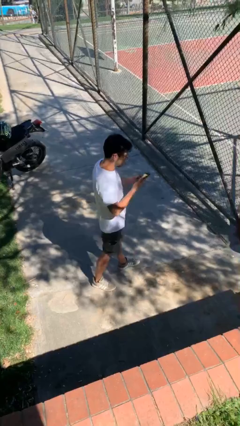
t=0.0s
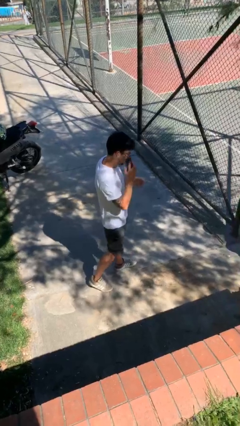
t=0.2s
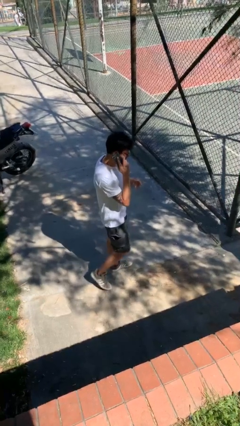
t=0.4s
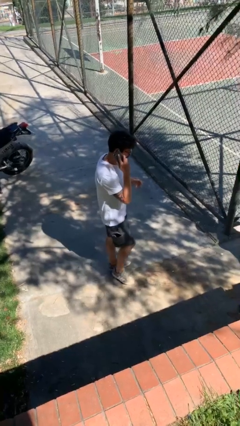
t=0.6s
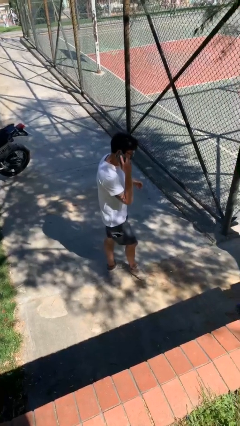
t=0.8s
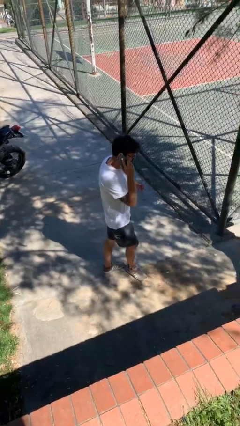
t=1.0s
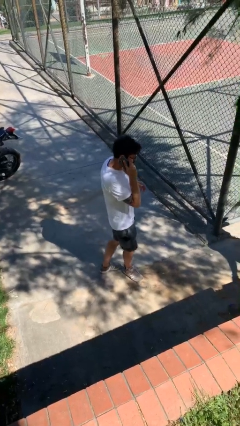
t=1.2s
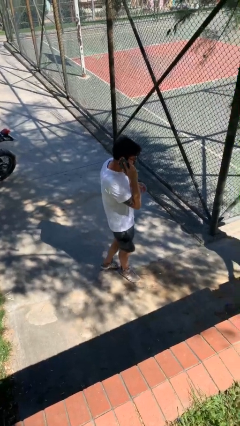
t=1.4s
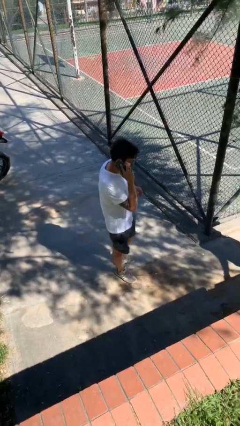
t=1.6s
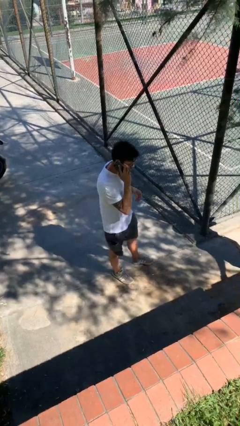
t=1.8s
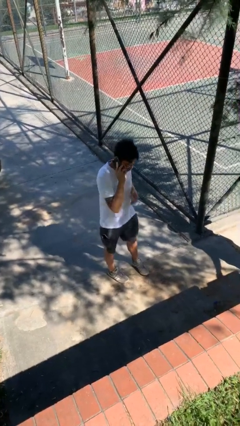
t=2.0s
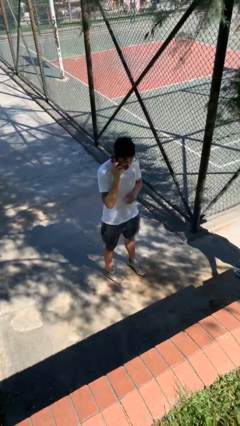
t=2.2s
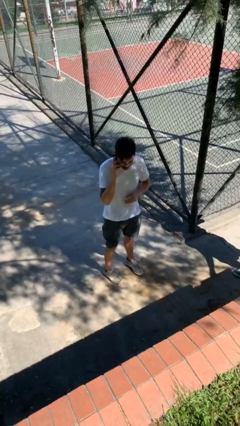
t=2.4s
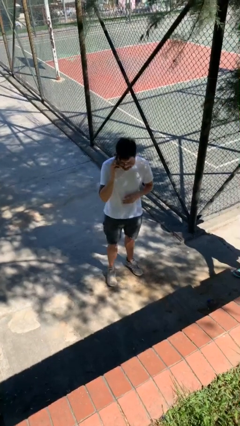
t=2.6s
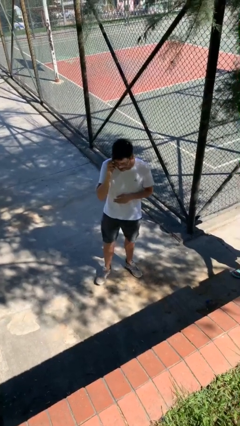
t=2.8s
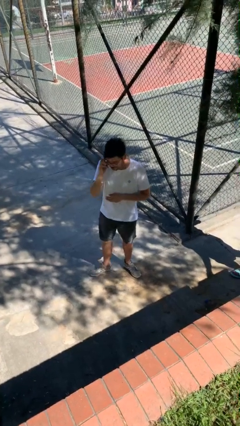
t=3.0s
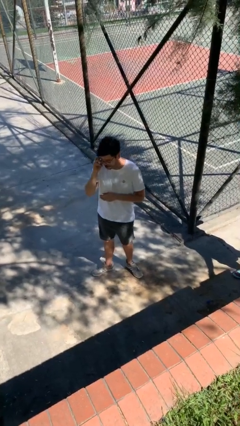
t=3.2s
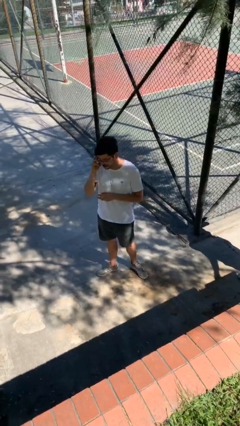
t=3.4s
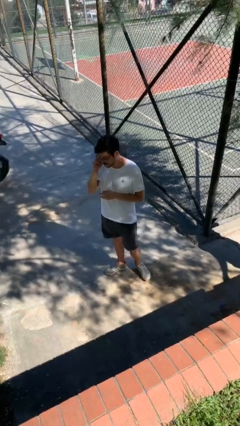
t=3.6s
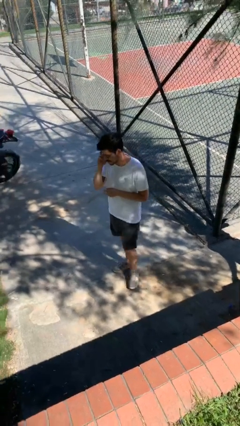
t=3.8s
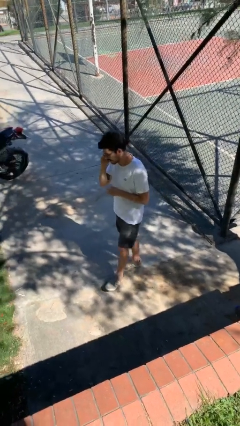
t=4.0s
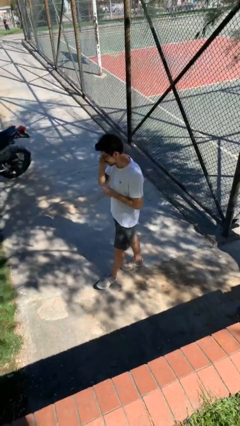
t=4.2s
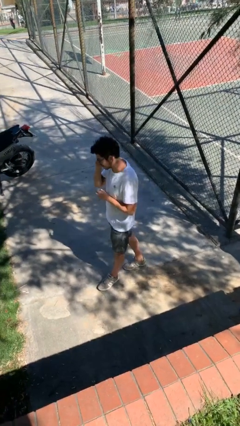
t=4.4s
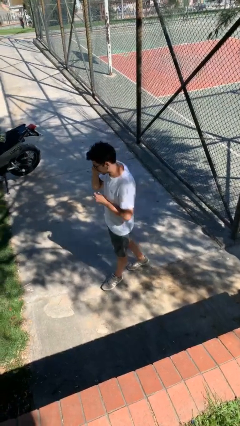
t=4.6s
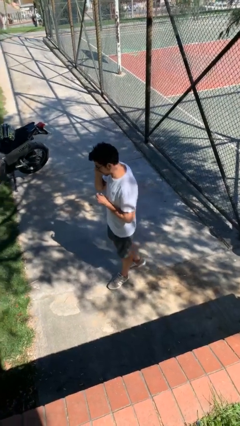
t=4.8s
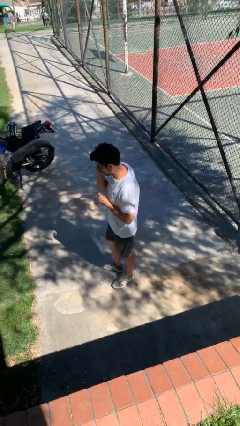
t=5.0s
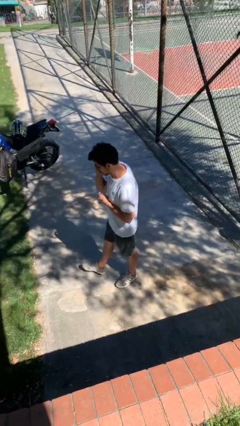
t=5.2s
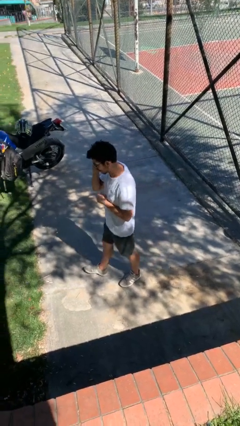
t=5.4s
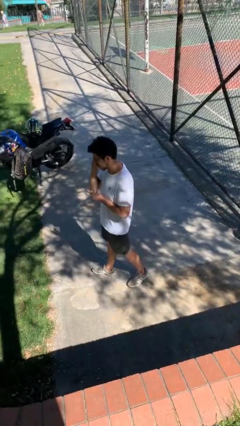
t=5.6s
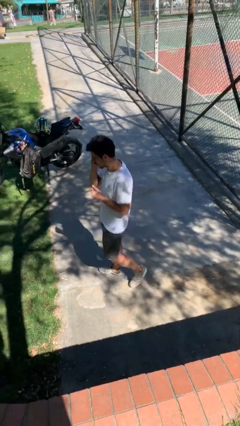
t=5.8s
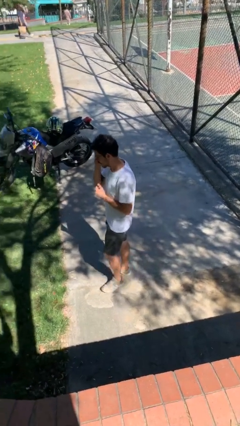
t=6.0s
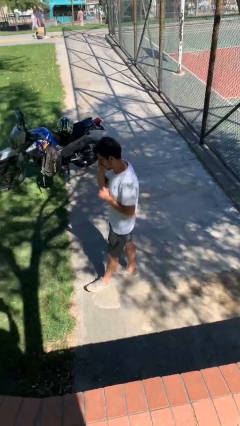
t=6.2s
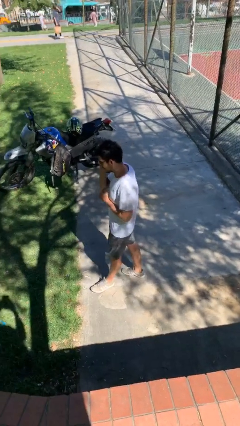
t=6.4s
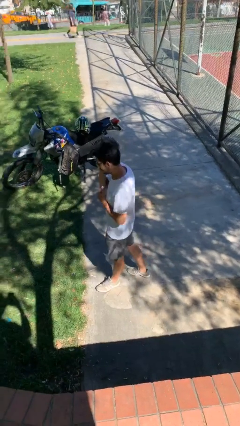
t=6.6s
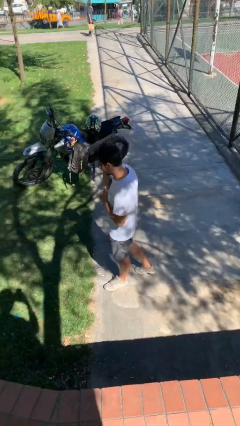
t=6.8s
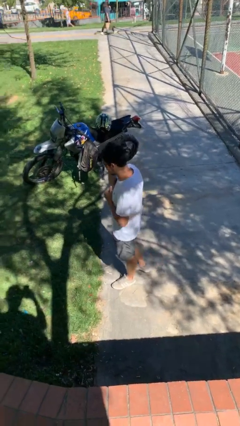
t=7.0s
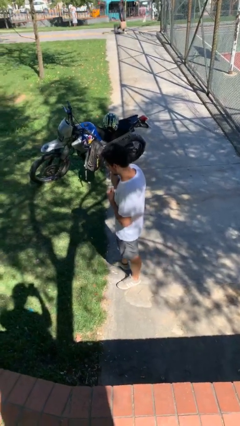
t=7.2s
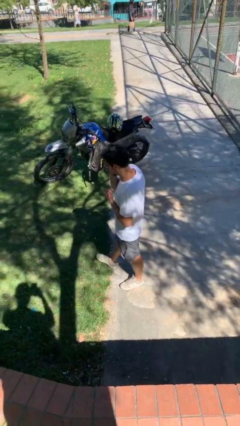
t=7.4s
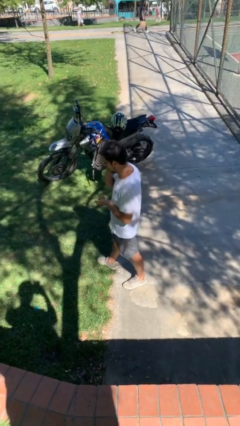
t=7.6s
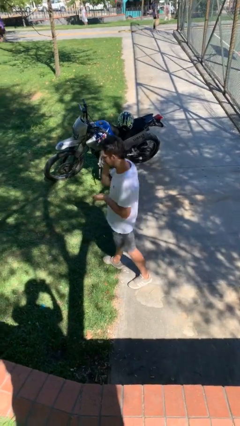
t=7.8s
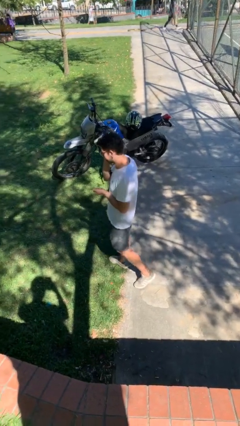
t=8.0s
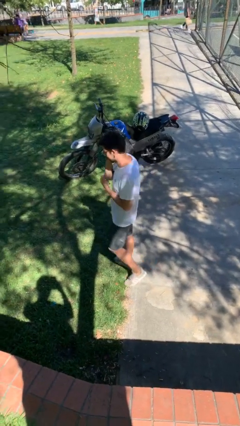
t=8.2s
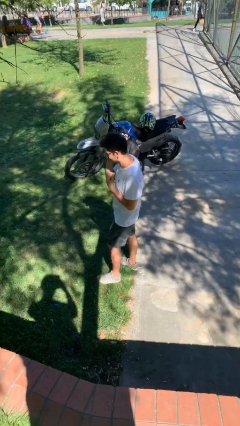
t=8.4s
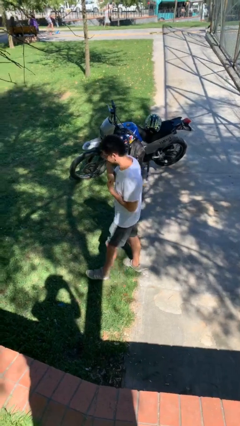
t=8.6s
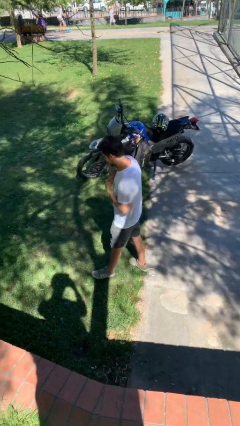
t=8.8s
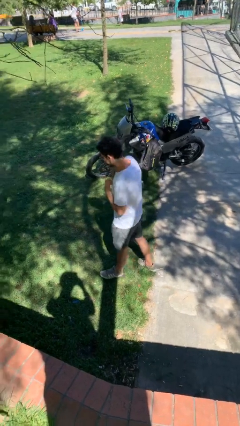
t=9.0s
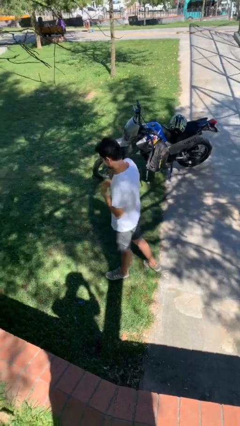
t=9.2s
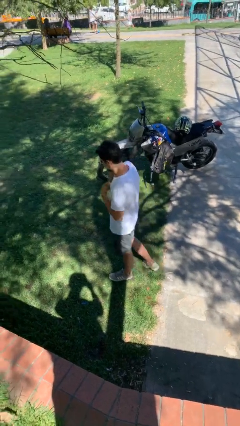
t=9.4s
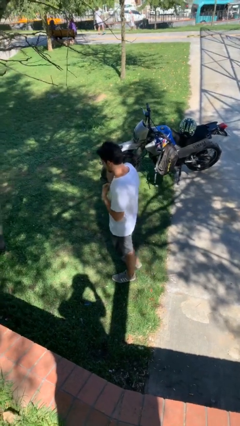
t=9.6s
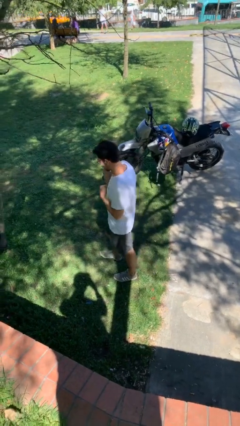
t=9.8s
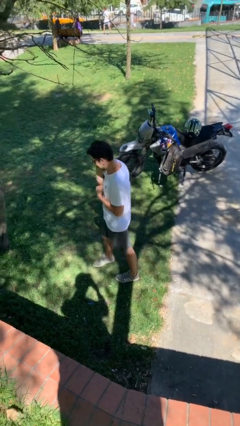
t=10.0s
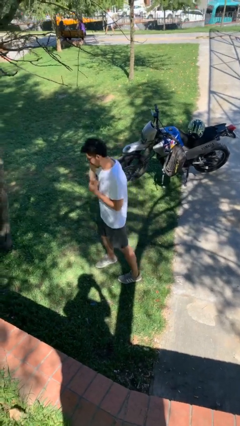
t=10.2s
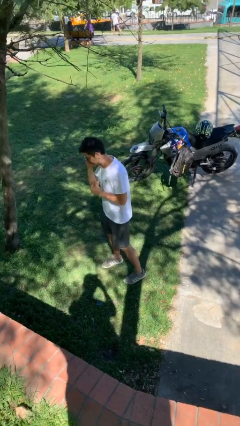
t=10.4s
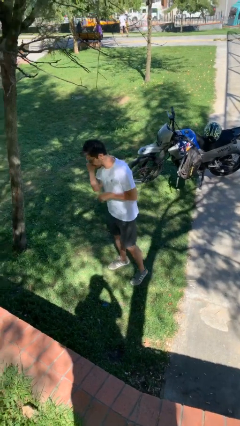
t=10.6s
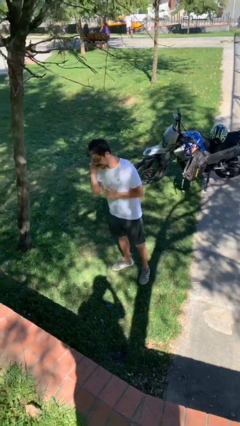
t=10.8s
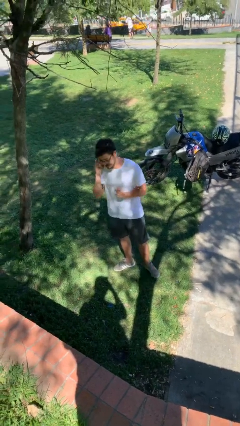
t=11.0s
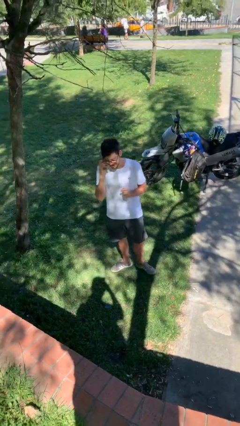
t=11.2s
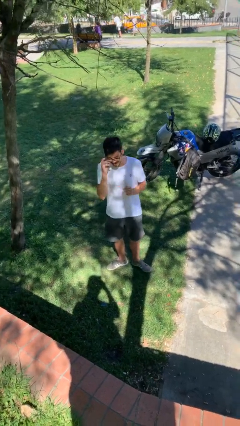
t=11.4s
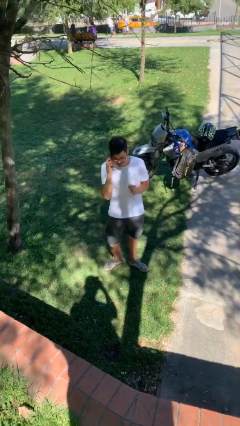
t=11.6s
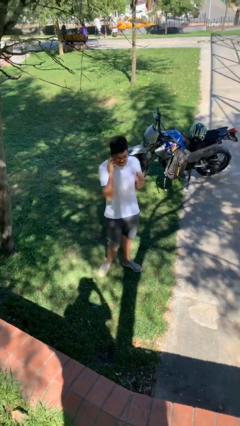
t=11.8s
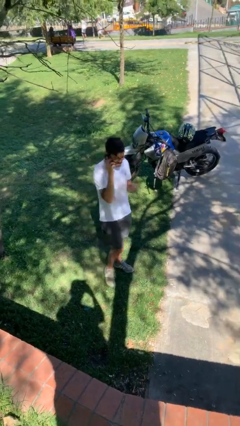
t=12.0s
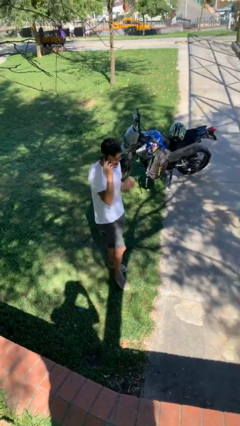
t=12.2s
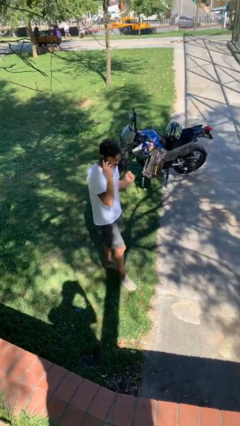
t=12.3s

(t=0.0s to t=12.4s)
person talks on phone

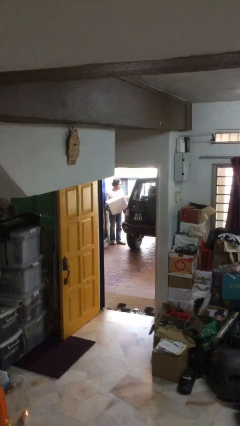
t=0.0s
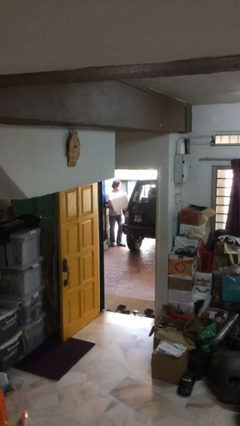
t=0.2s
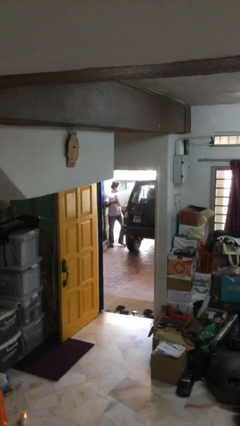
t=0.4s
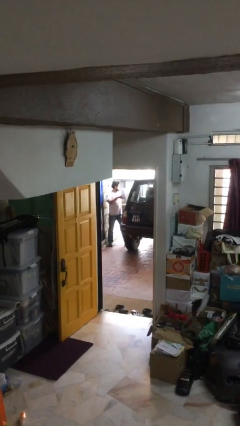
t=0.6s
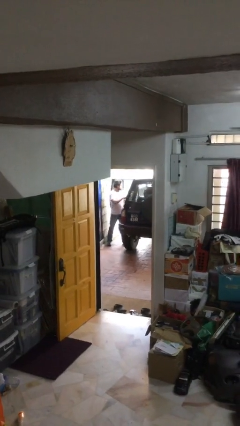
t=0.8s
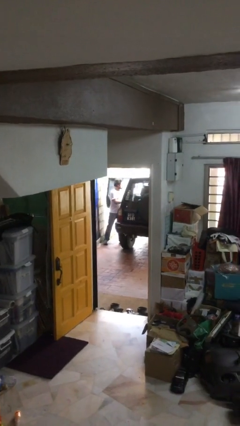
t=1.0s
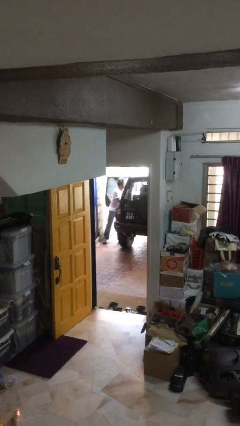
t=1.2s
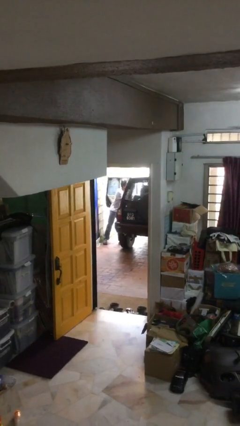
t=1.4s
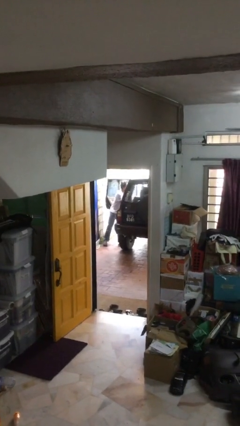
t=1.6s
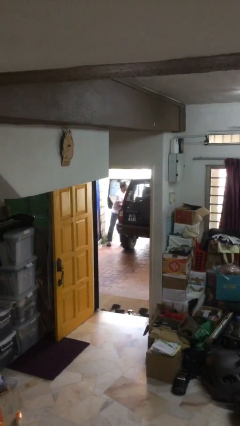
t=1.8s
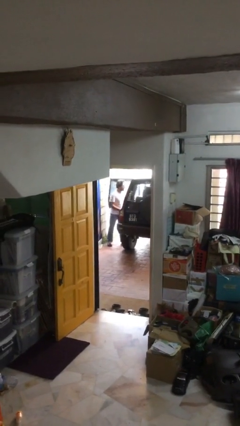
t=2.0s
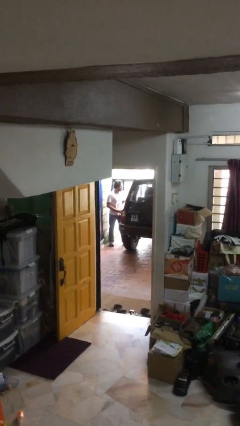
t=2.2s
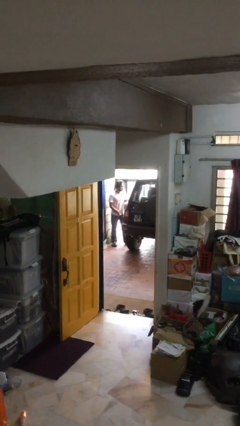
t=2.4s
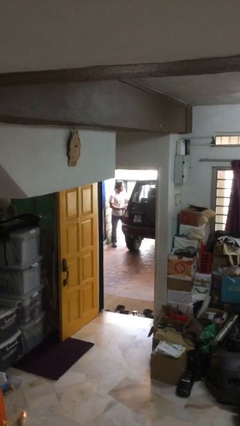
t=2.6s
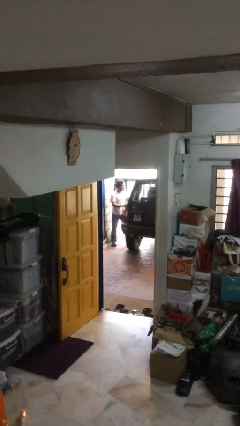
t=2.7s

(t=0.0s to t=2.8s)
person loads car

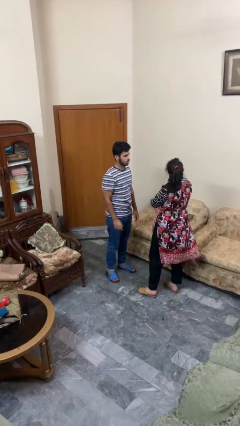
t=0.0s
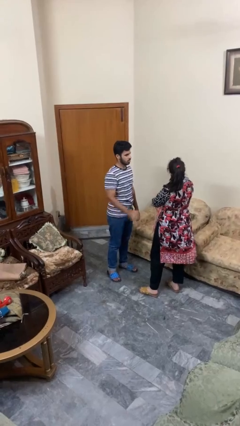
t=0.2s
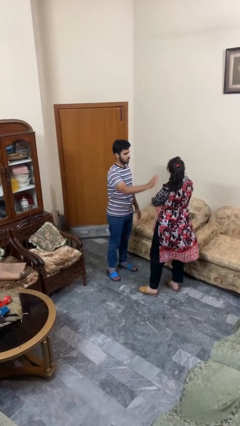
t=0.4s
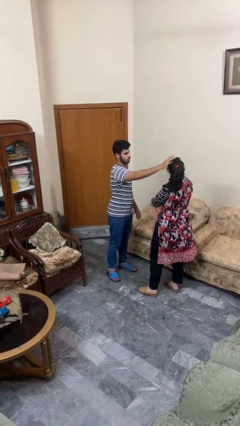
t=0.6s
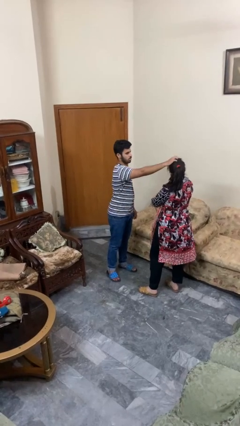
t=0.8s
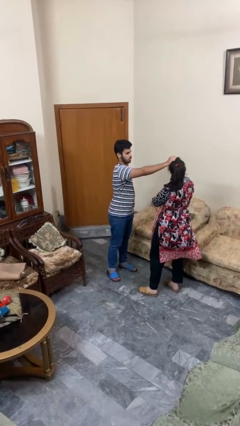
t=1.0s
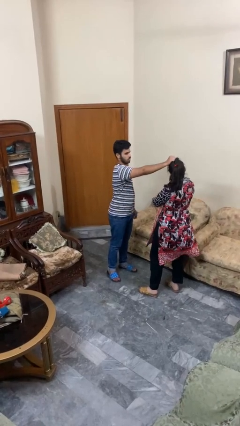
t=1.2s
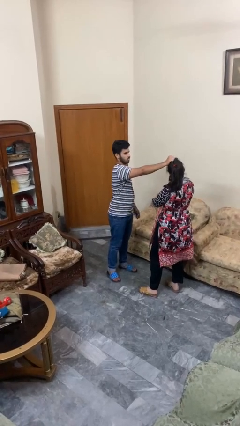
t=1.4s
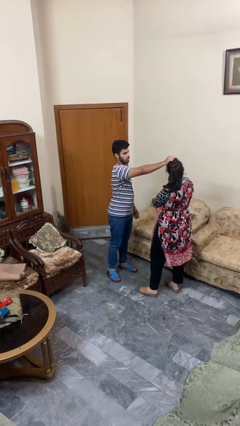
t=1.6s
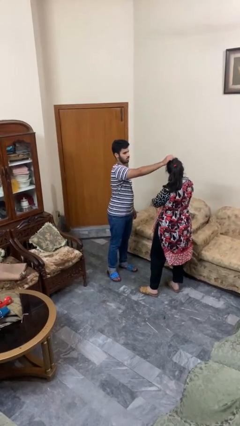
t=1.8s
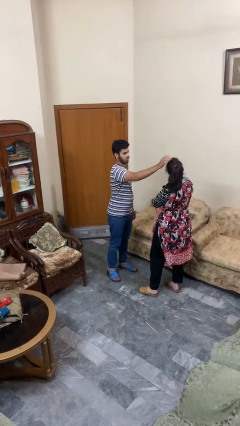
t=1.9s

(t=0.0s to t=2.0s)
person grabs person by hair

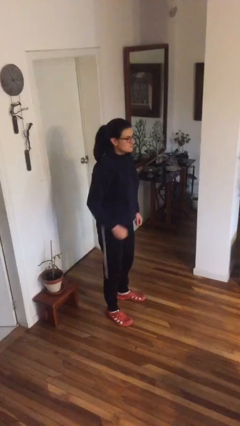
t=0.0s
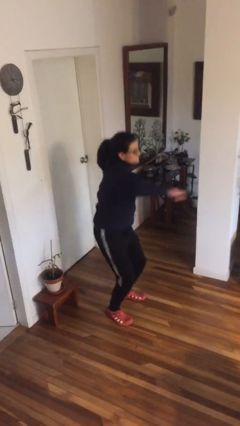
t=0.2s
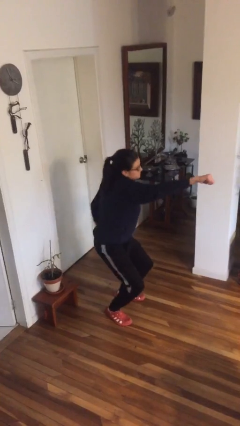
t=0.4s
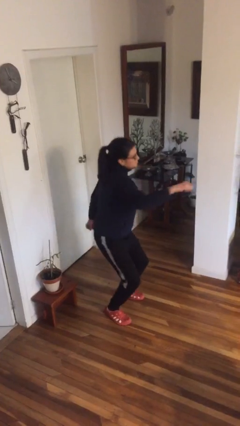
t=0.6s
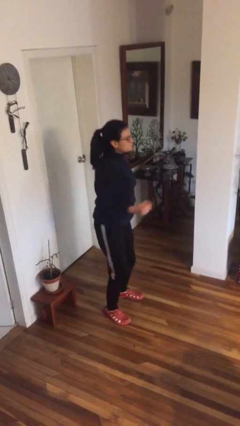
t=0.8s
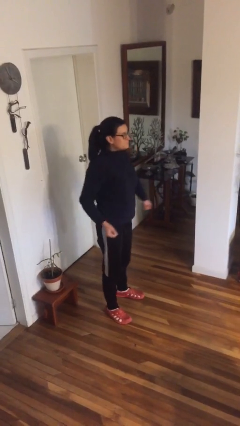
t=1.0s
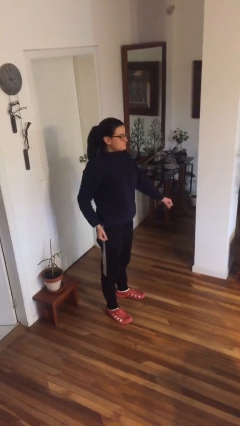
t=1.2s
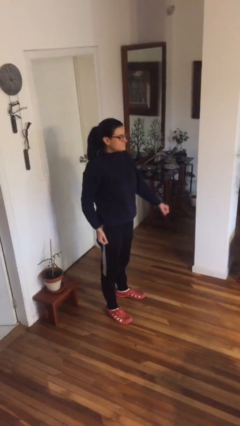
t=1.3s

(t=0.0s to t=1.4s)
person punches
